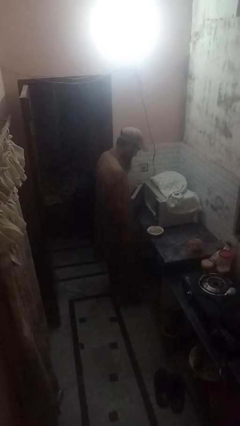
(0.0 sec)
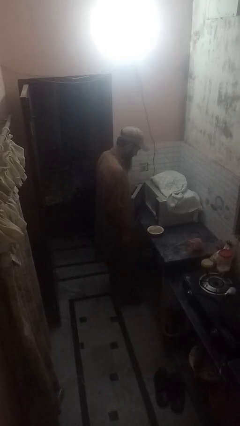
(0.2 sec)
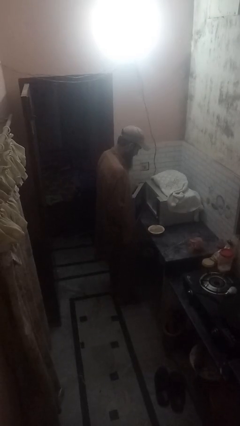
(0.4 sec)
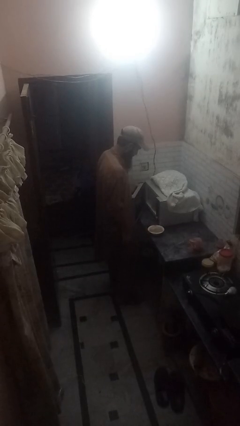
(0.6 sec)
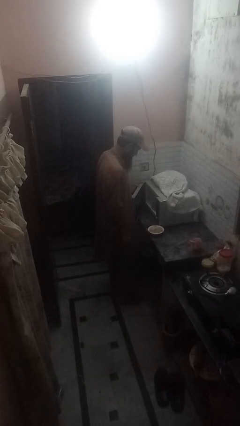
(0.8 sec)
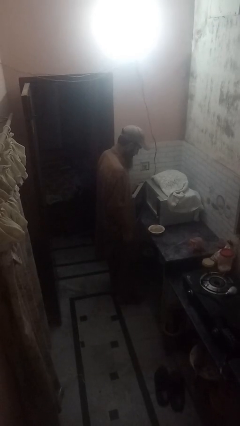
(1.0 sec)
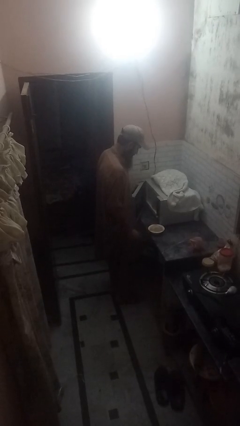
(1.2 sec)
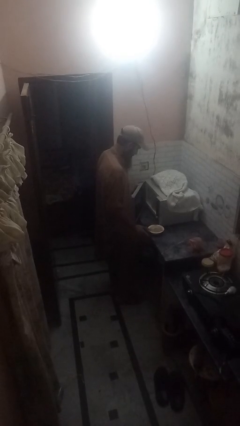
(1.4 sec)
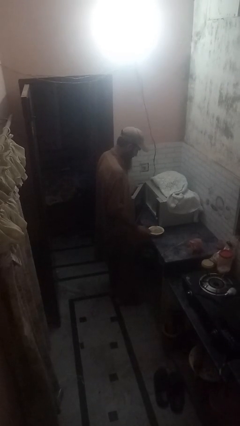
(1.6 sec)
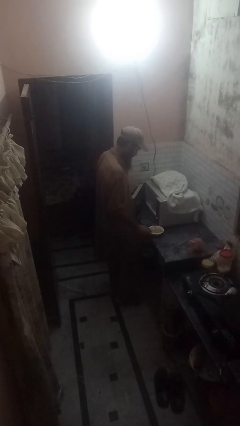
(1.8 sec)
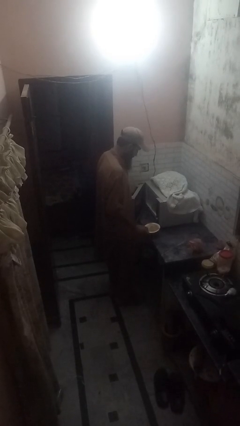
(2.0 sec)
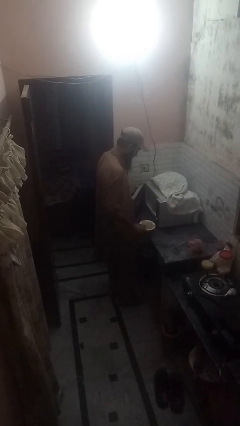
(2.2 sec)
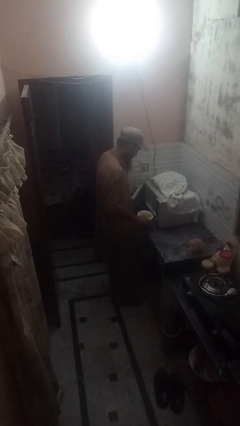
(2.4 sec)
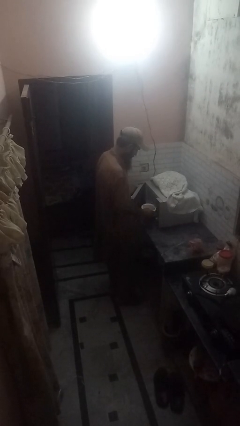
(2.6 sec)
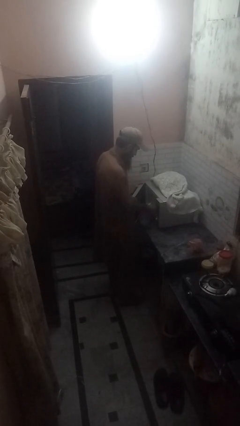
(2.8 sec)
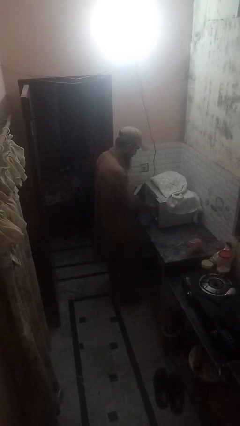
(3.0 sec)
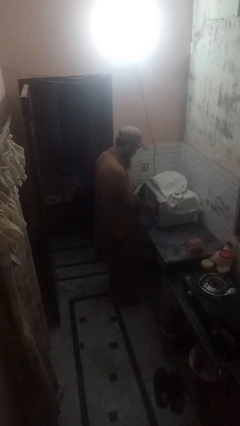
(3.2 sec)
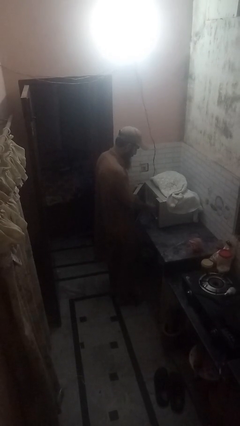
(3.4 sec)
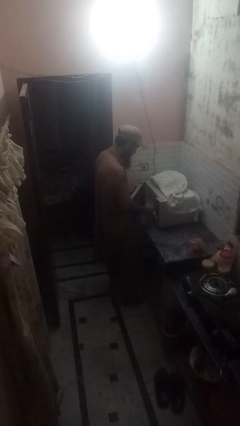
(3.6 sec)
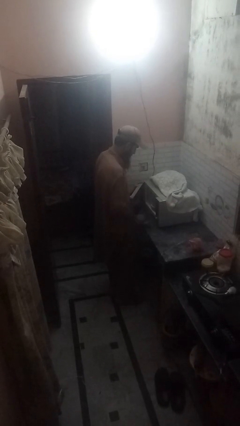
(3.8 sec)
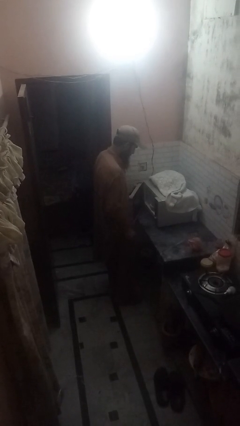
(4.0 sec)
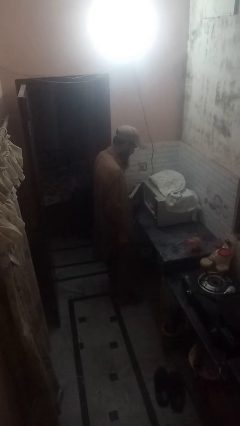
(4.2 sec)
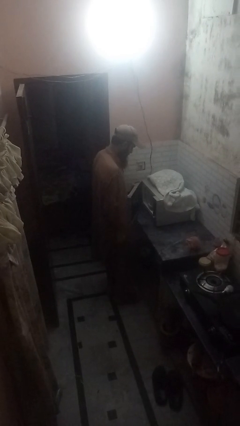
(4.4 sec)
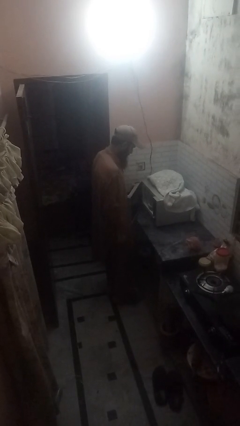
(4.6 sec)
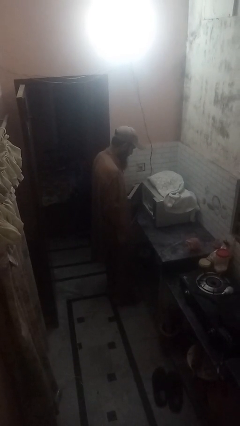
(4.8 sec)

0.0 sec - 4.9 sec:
person puts object into microwave

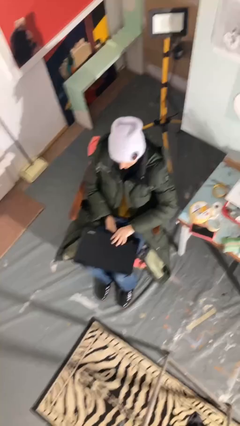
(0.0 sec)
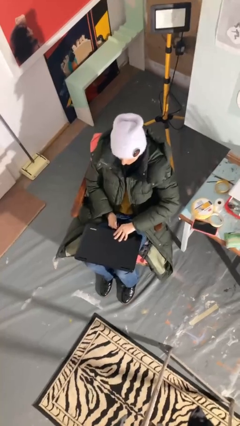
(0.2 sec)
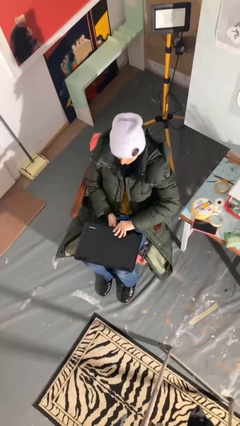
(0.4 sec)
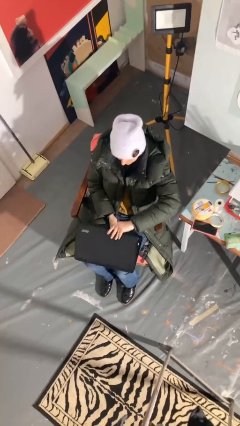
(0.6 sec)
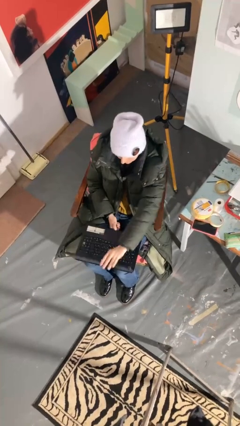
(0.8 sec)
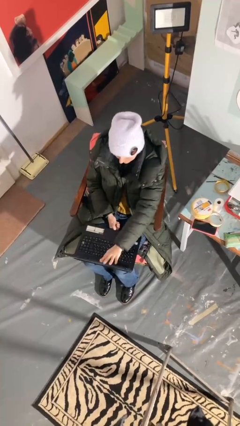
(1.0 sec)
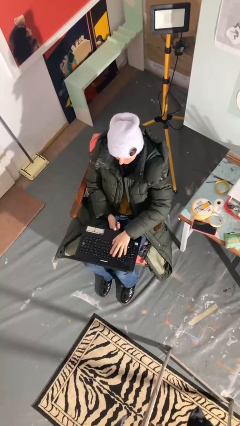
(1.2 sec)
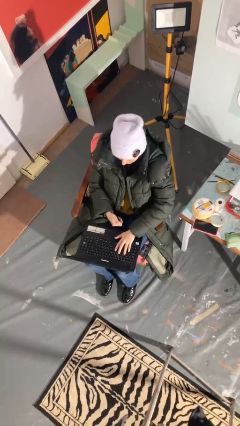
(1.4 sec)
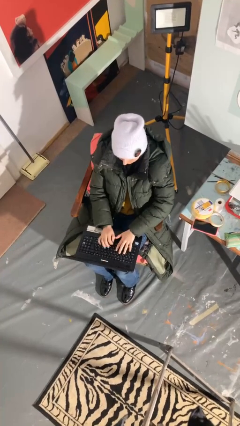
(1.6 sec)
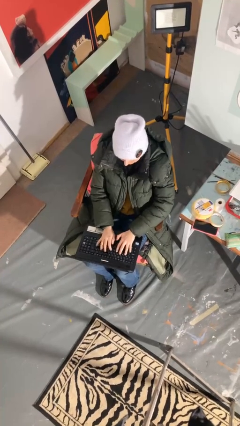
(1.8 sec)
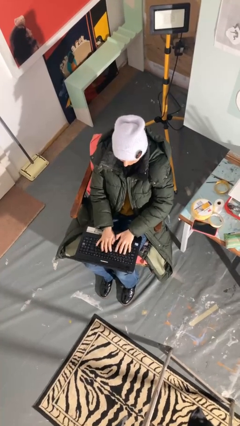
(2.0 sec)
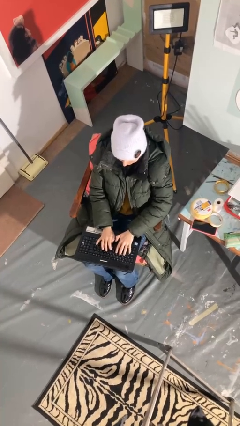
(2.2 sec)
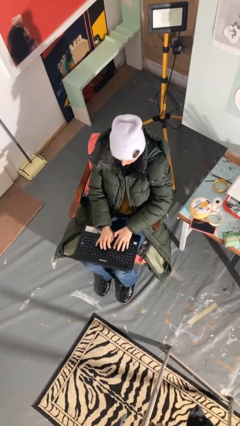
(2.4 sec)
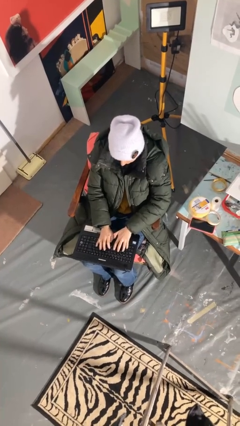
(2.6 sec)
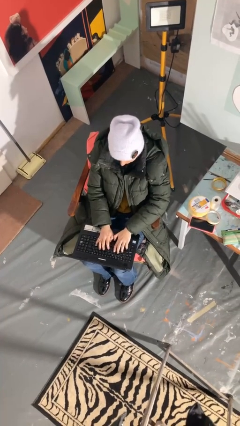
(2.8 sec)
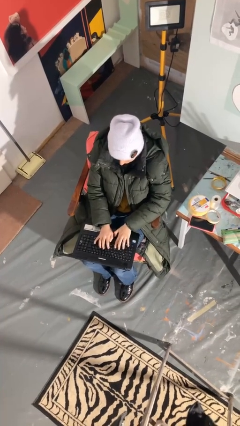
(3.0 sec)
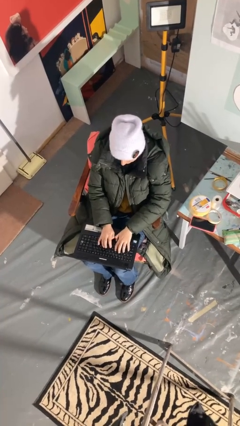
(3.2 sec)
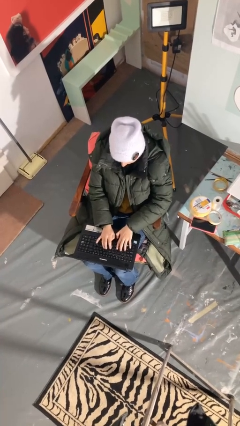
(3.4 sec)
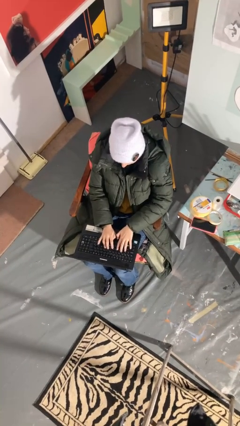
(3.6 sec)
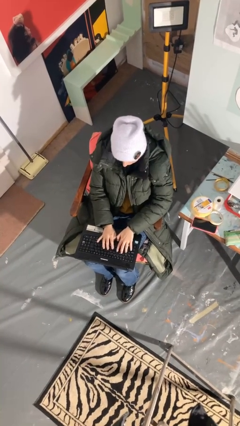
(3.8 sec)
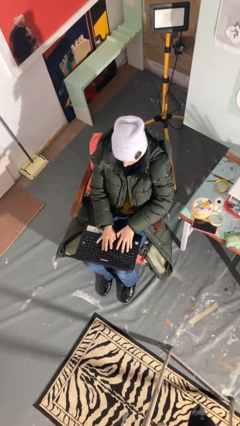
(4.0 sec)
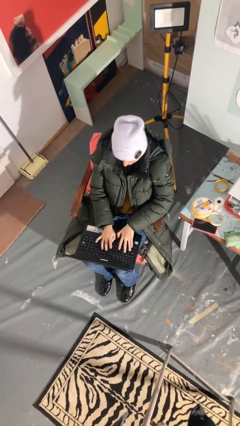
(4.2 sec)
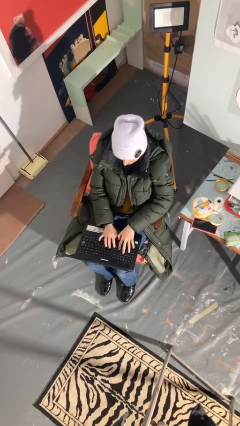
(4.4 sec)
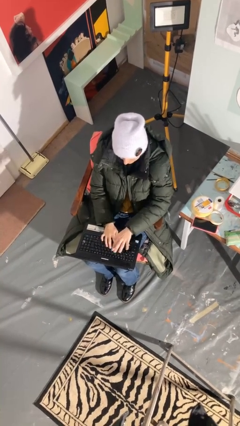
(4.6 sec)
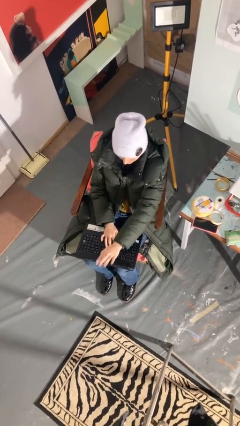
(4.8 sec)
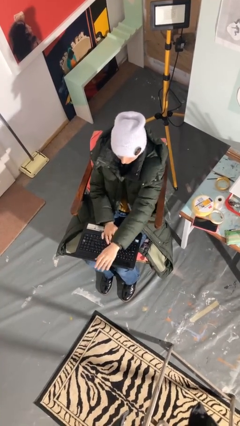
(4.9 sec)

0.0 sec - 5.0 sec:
person interacts with laptop

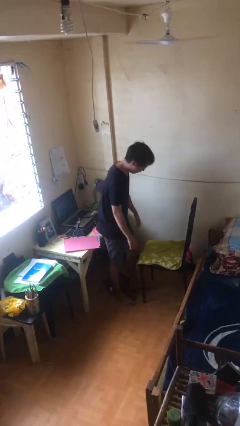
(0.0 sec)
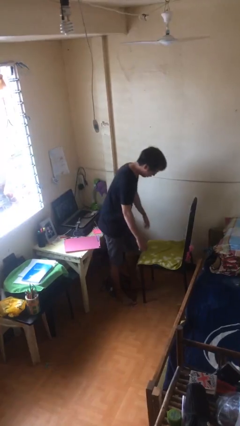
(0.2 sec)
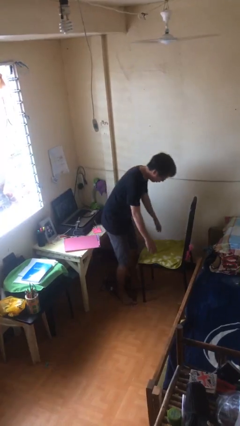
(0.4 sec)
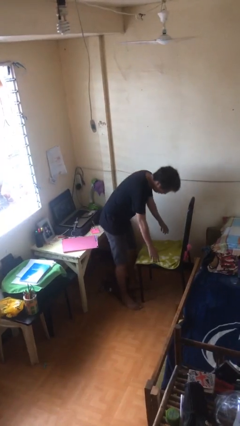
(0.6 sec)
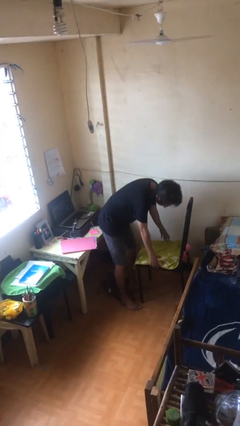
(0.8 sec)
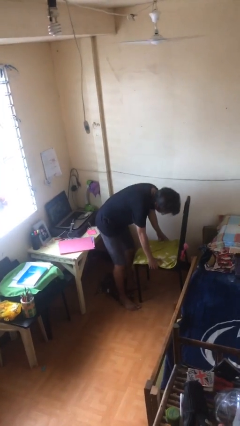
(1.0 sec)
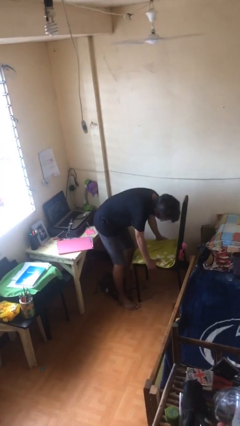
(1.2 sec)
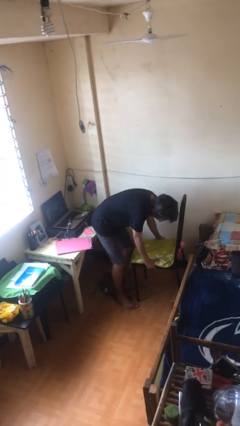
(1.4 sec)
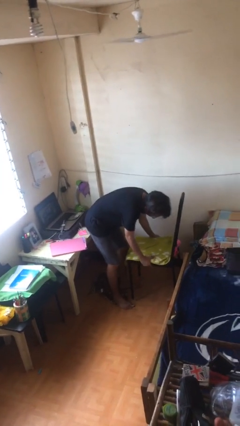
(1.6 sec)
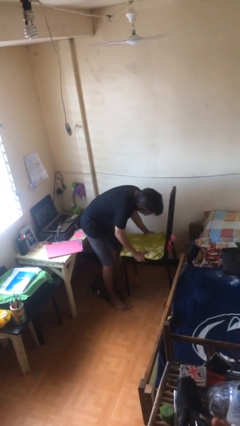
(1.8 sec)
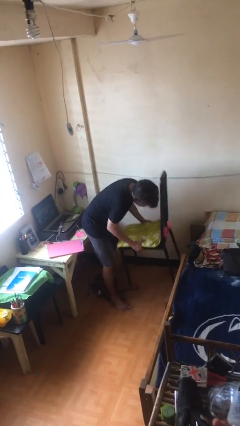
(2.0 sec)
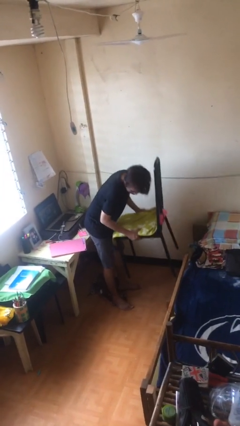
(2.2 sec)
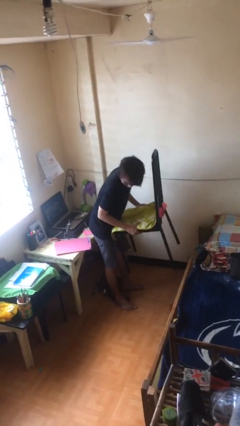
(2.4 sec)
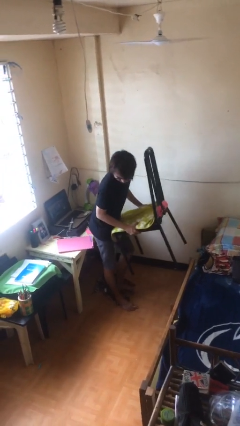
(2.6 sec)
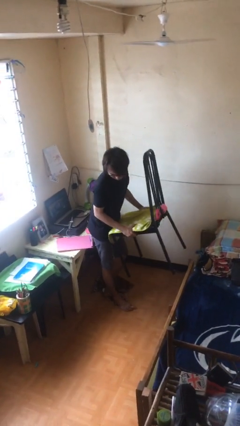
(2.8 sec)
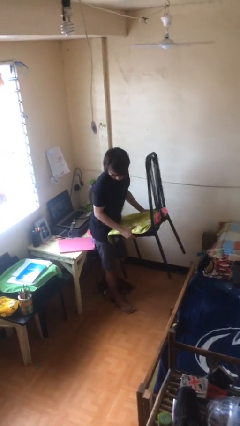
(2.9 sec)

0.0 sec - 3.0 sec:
person picks up object from floor

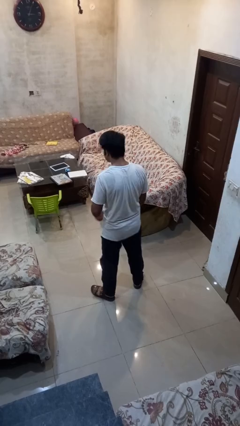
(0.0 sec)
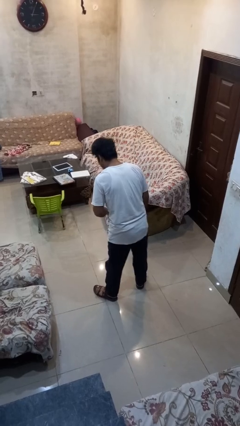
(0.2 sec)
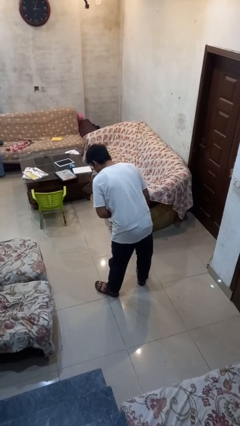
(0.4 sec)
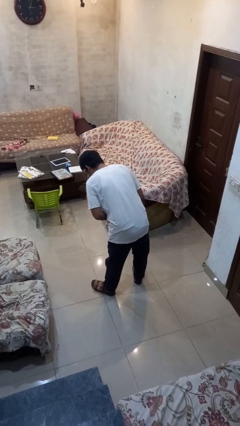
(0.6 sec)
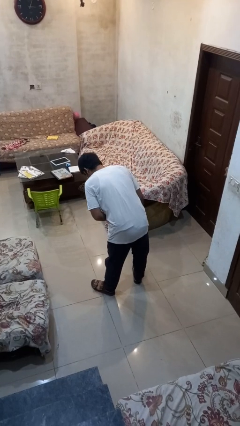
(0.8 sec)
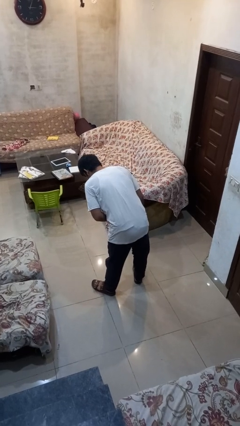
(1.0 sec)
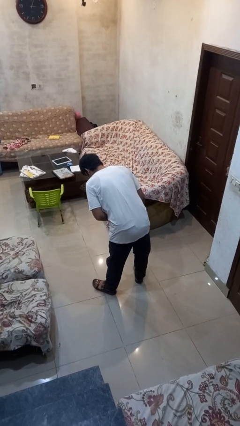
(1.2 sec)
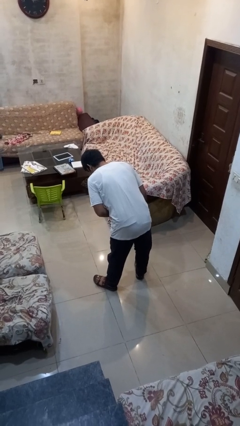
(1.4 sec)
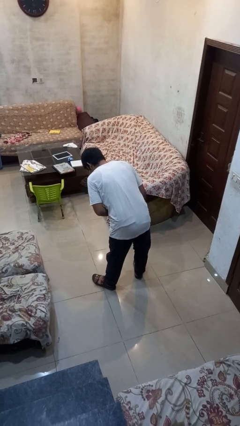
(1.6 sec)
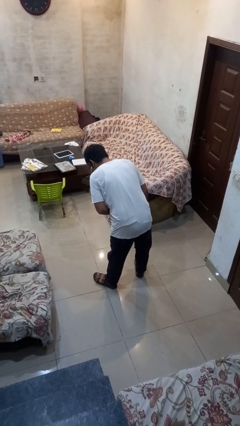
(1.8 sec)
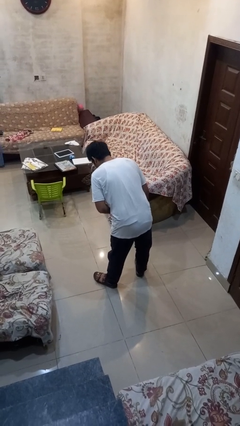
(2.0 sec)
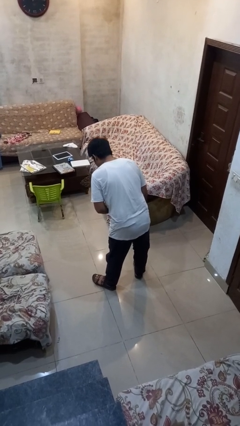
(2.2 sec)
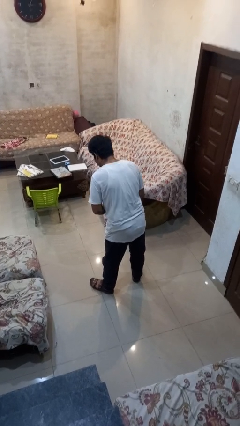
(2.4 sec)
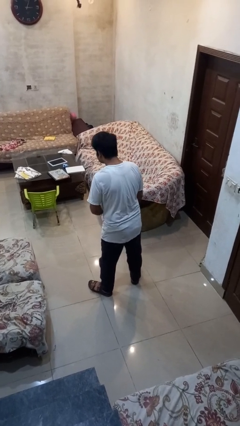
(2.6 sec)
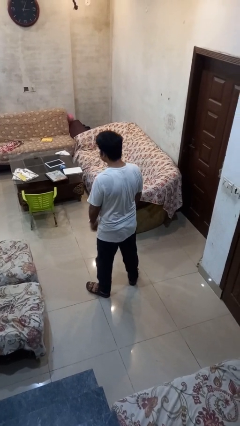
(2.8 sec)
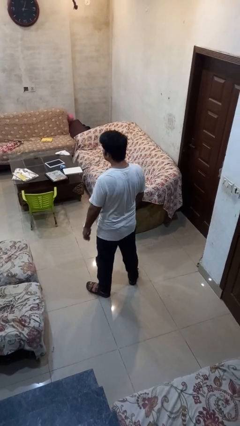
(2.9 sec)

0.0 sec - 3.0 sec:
person bows

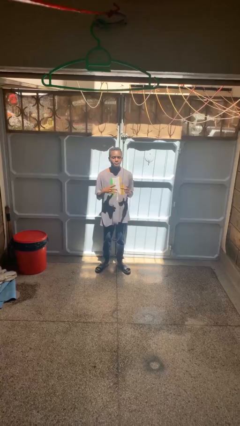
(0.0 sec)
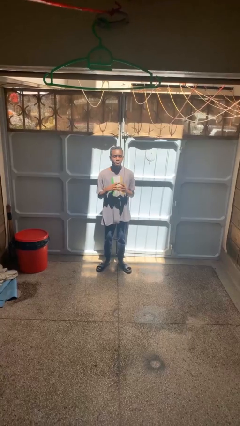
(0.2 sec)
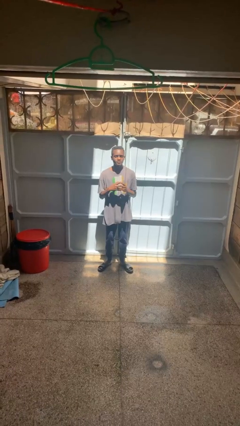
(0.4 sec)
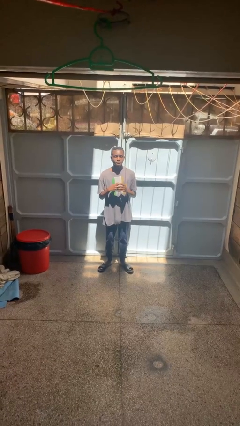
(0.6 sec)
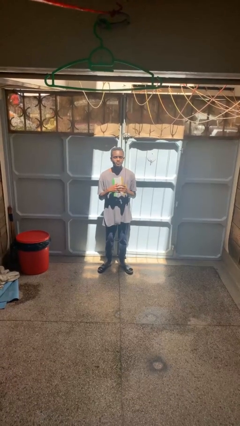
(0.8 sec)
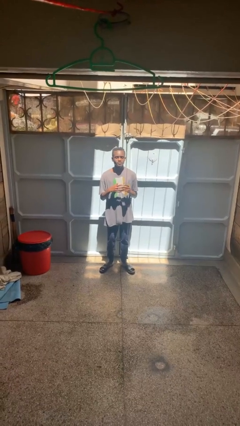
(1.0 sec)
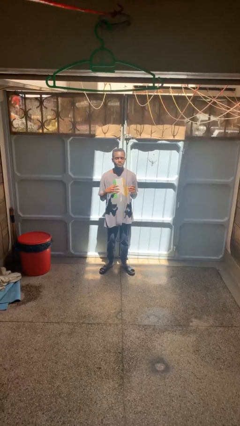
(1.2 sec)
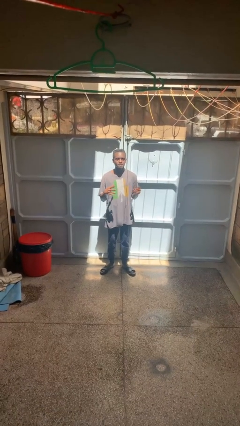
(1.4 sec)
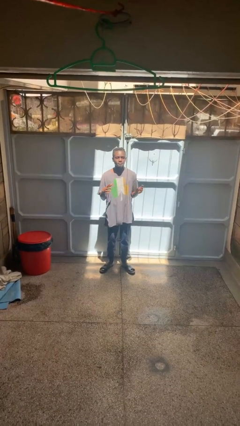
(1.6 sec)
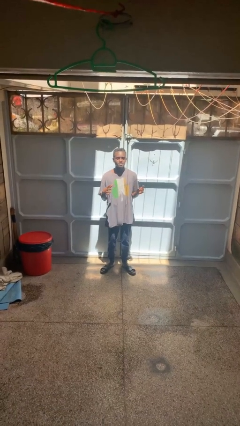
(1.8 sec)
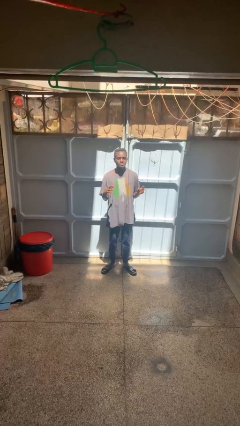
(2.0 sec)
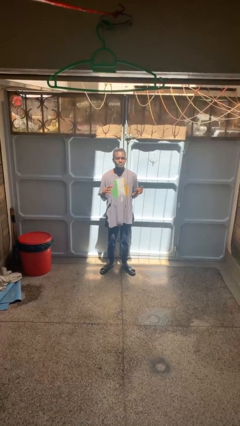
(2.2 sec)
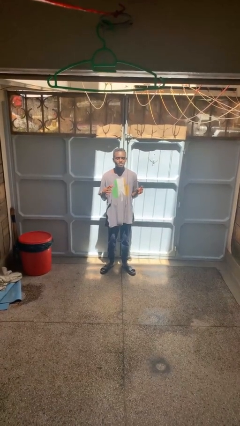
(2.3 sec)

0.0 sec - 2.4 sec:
person takes off ring
